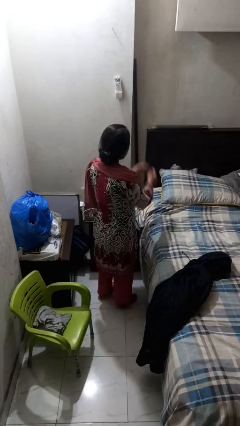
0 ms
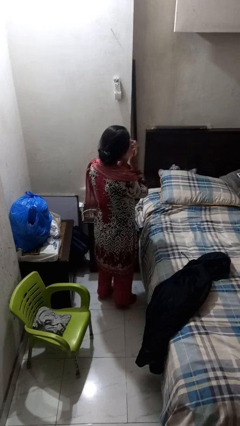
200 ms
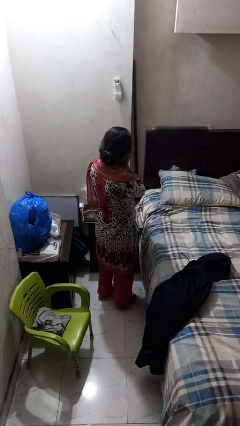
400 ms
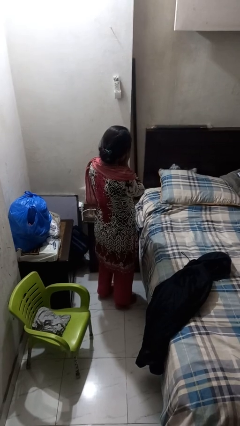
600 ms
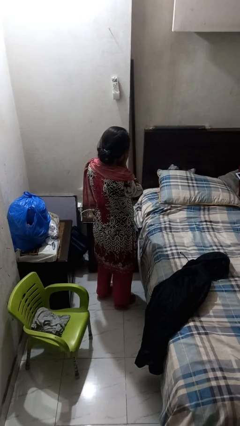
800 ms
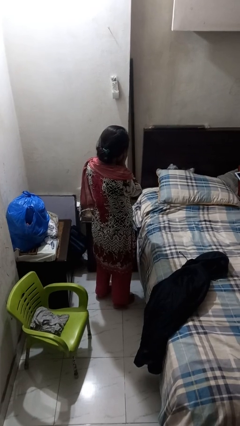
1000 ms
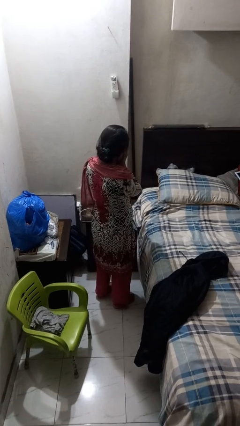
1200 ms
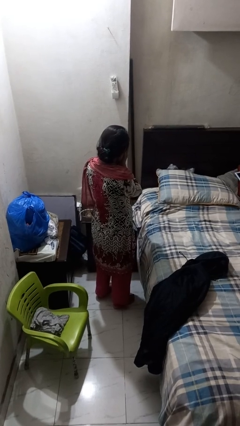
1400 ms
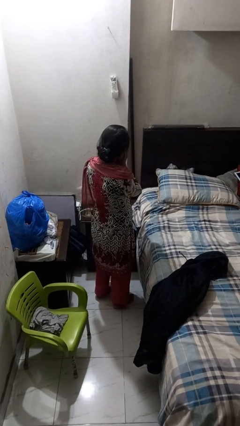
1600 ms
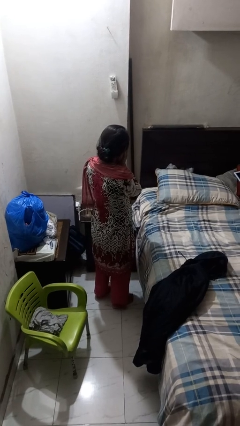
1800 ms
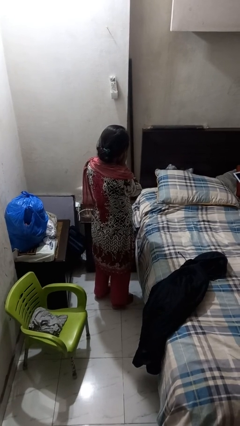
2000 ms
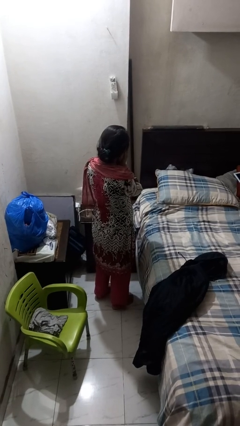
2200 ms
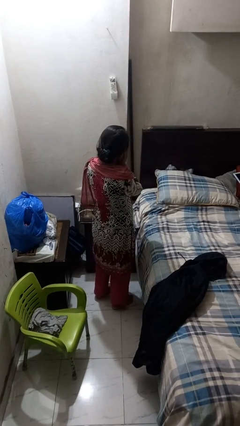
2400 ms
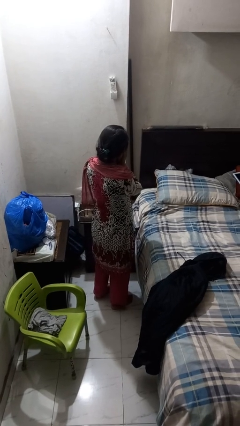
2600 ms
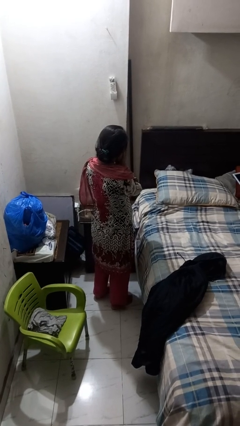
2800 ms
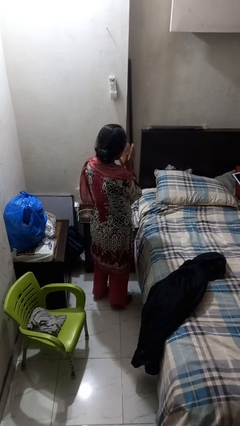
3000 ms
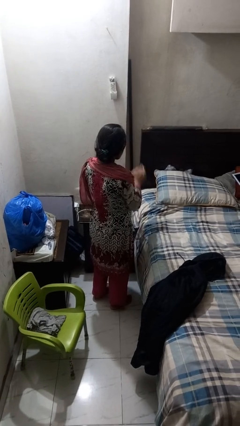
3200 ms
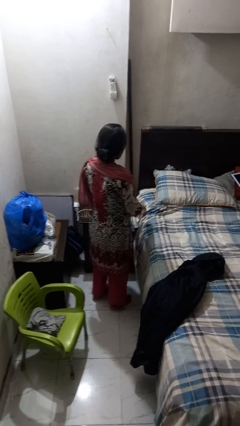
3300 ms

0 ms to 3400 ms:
person covers face with hands

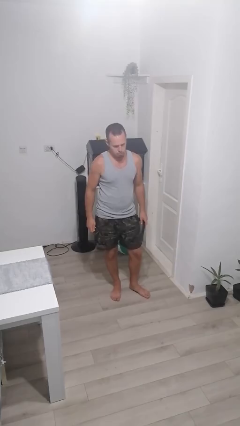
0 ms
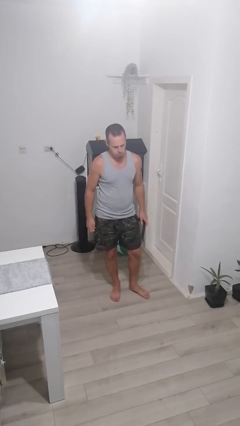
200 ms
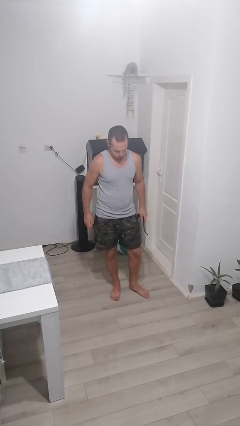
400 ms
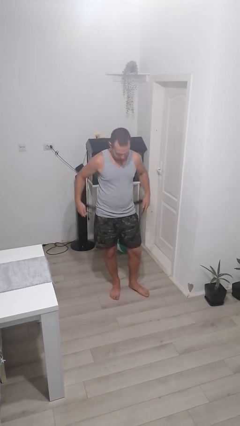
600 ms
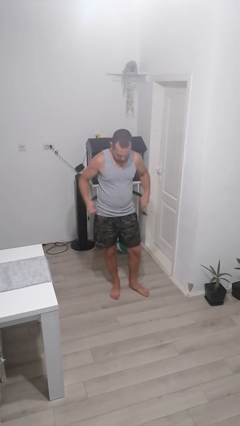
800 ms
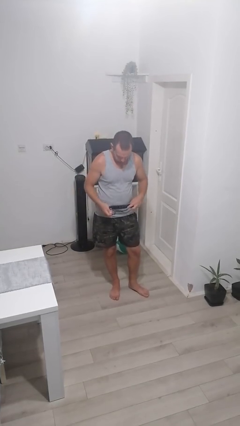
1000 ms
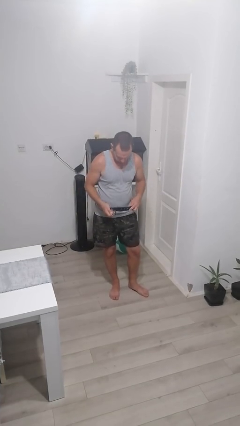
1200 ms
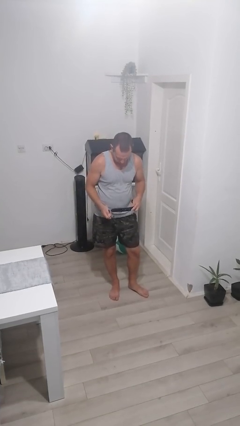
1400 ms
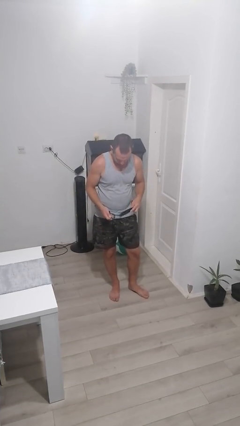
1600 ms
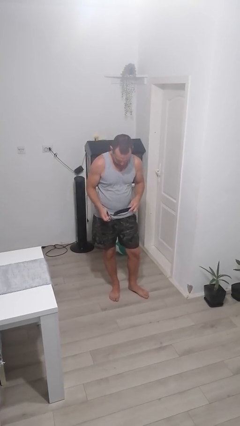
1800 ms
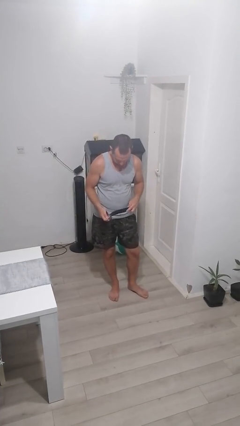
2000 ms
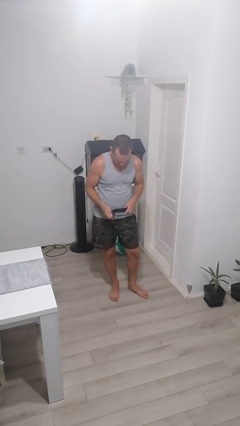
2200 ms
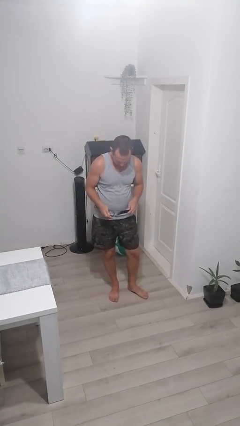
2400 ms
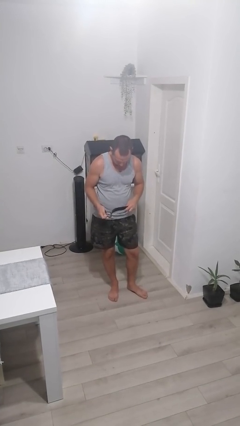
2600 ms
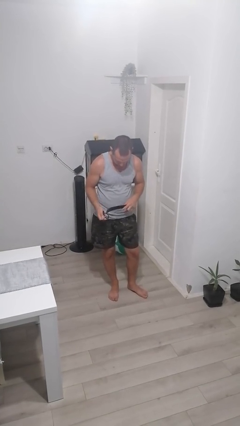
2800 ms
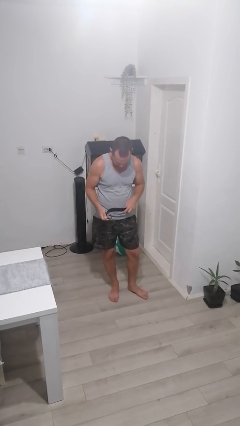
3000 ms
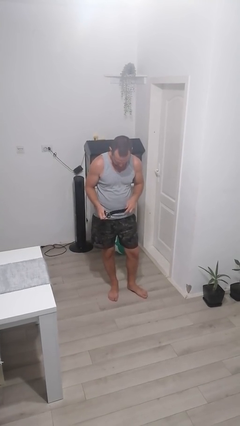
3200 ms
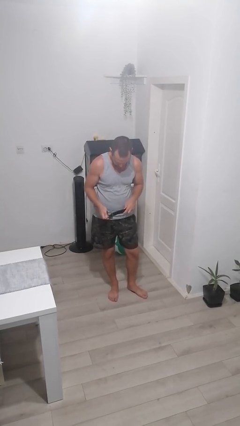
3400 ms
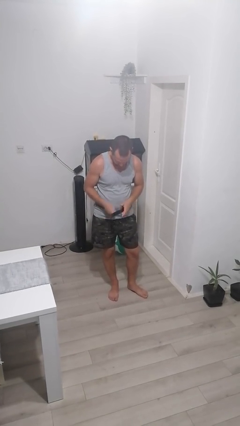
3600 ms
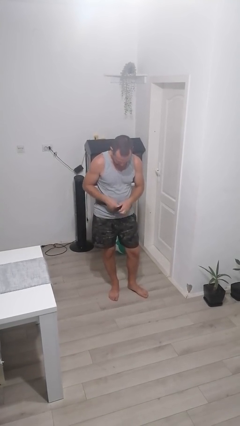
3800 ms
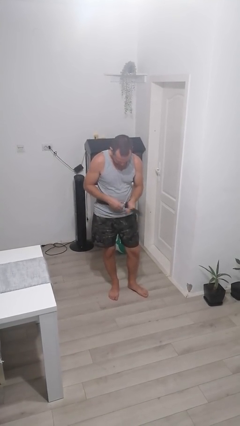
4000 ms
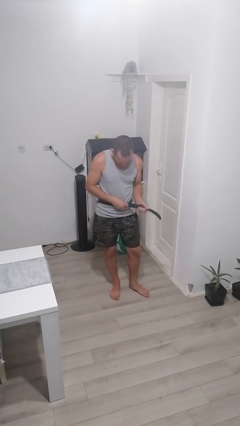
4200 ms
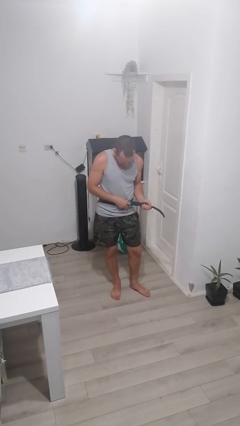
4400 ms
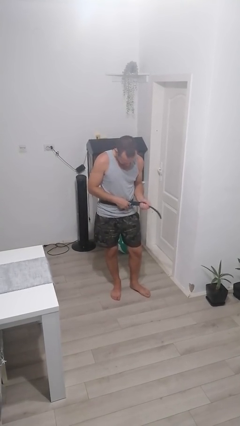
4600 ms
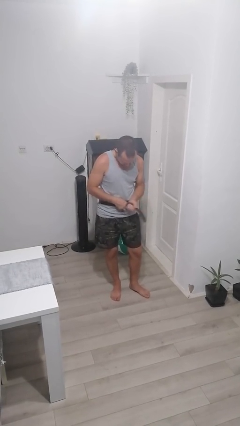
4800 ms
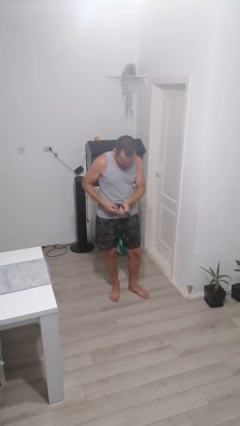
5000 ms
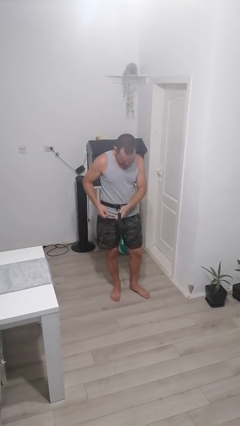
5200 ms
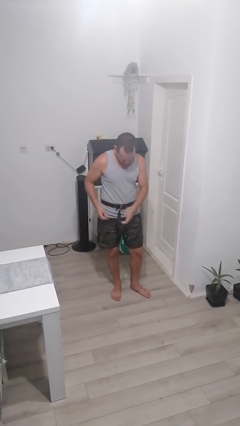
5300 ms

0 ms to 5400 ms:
person puts on belt

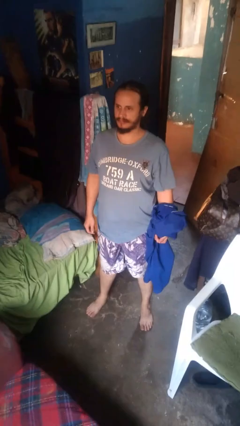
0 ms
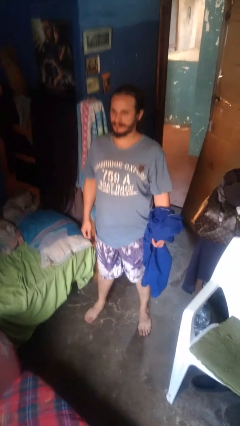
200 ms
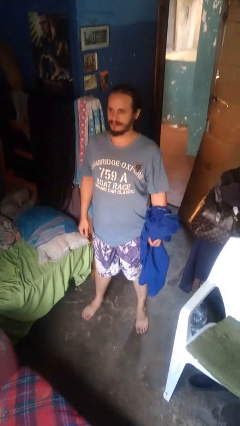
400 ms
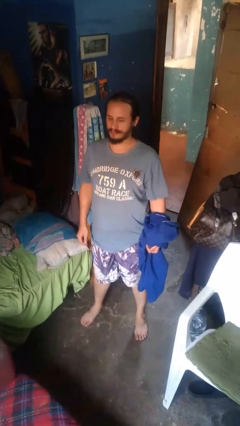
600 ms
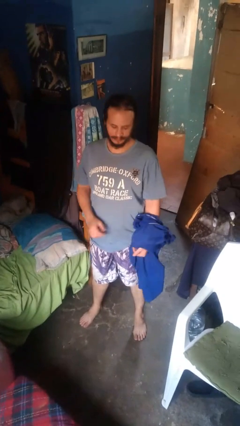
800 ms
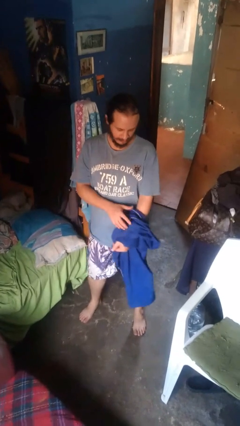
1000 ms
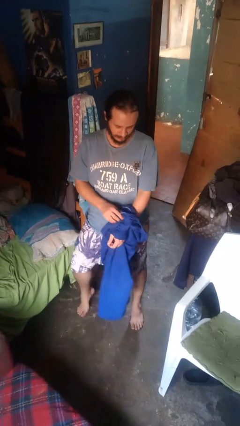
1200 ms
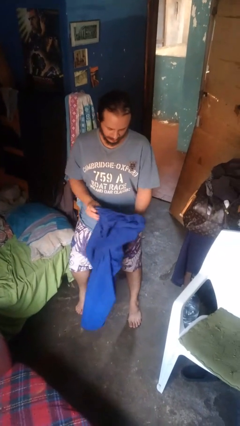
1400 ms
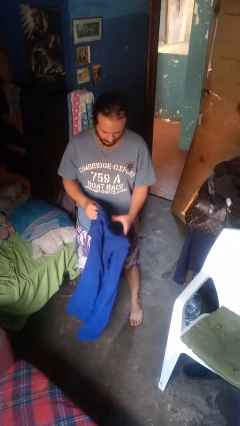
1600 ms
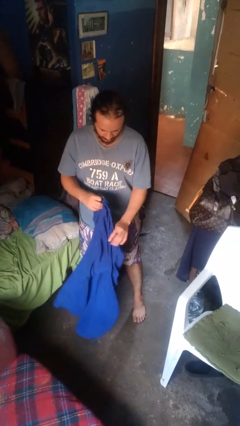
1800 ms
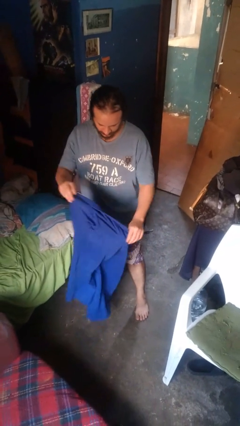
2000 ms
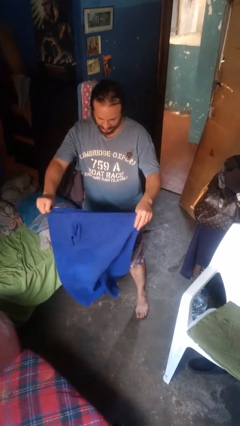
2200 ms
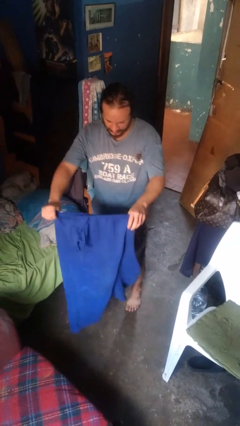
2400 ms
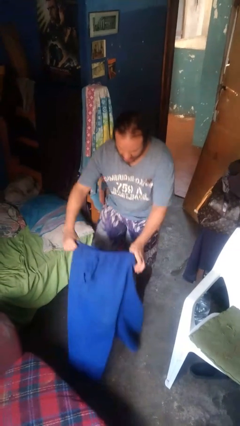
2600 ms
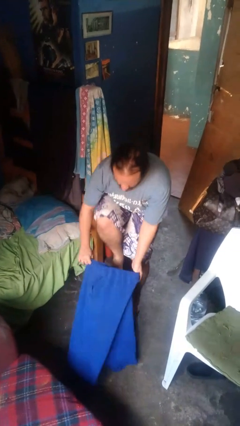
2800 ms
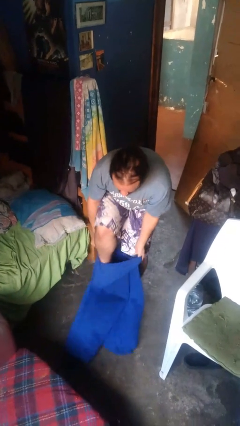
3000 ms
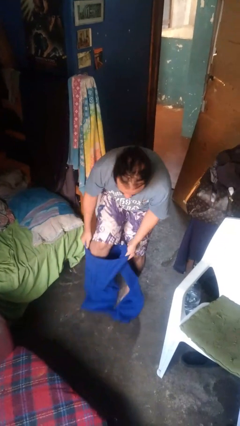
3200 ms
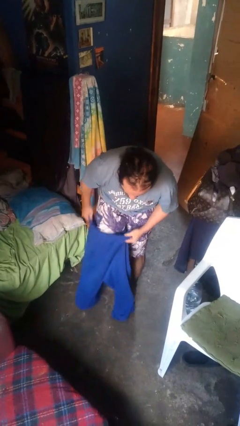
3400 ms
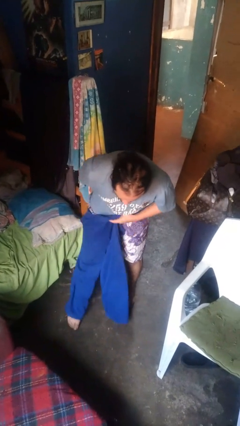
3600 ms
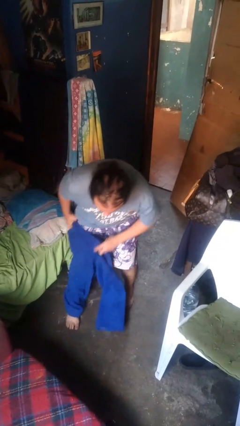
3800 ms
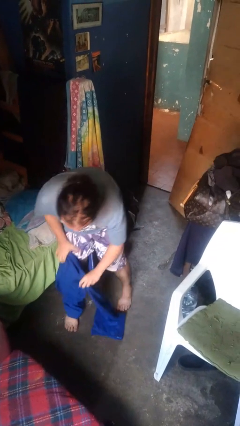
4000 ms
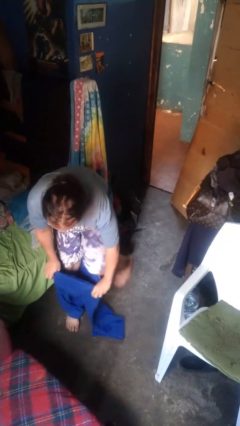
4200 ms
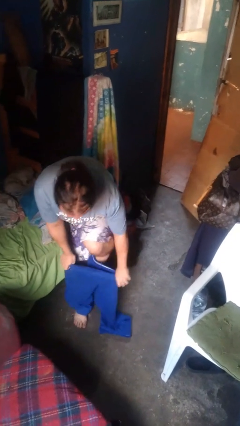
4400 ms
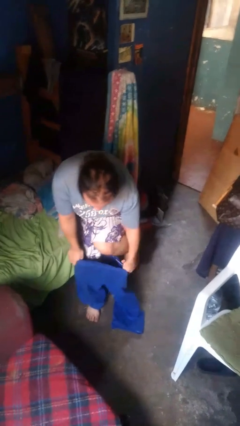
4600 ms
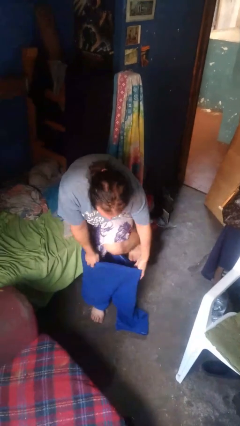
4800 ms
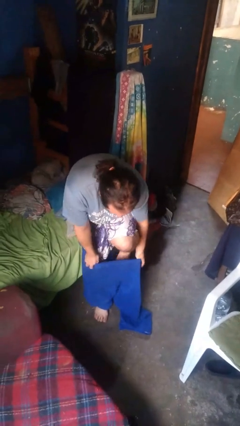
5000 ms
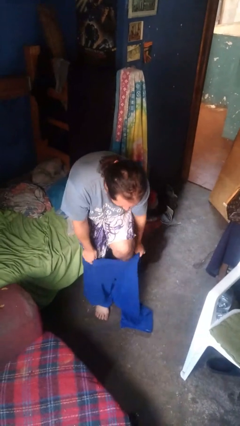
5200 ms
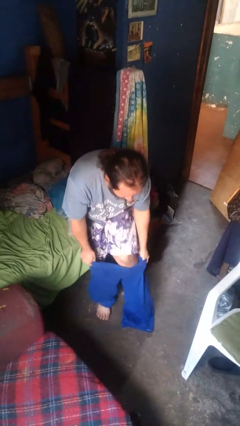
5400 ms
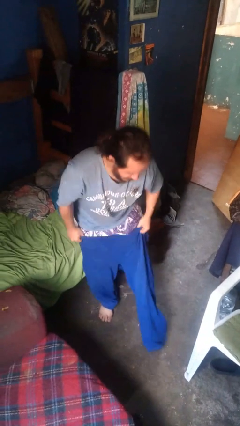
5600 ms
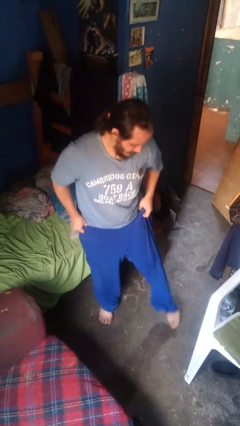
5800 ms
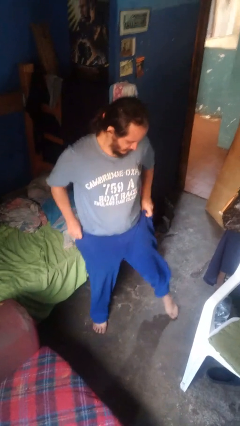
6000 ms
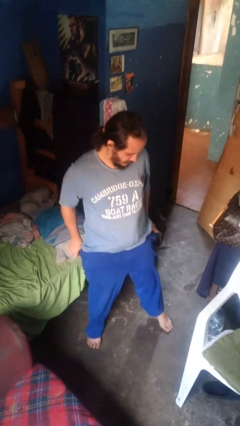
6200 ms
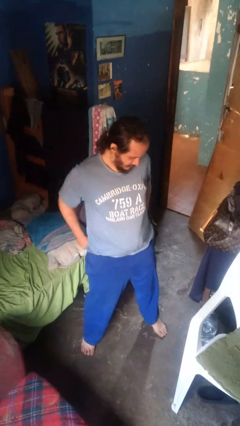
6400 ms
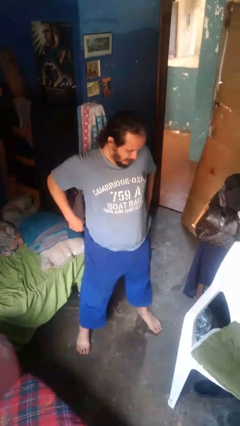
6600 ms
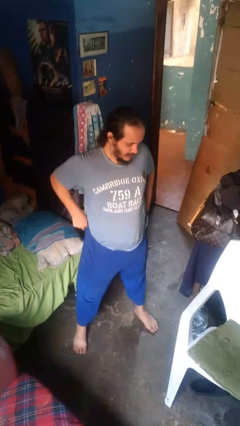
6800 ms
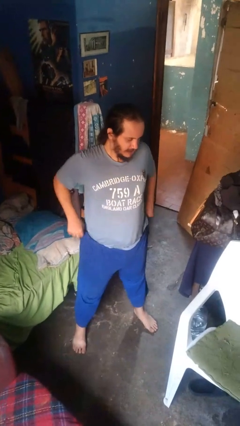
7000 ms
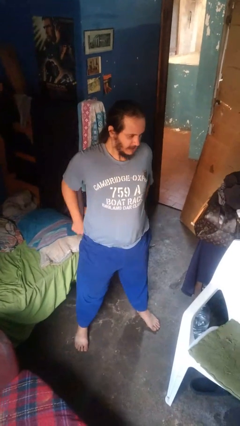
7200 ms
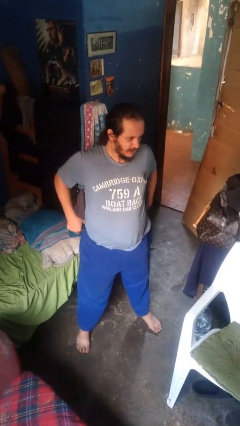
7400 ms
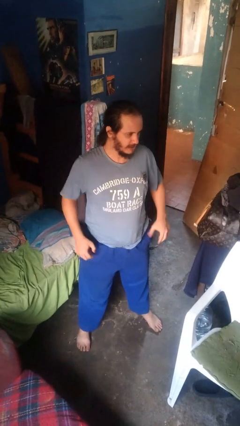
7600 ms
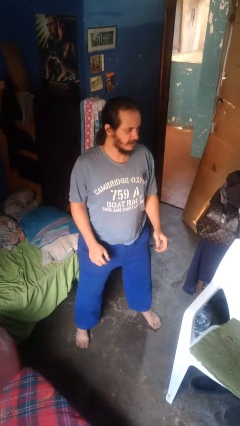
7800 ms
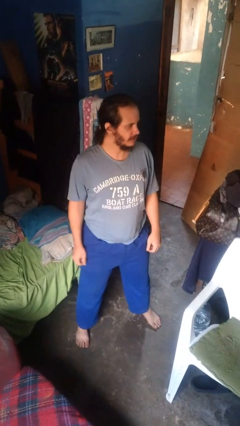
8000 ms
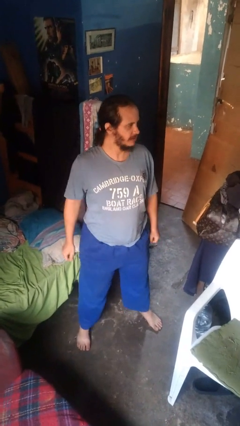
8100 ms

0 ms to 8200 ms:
person puts on pants

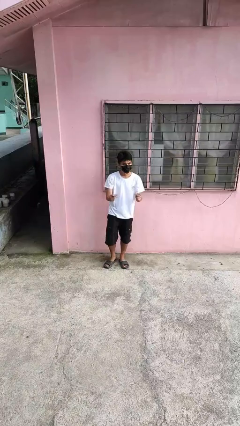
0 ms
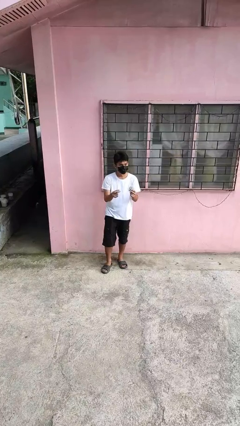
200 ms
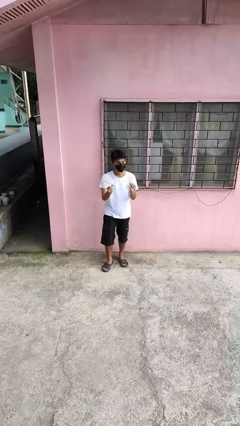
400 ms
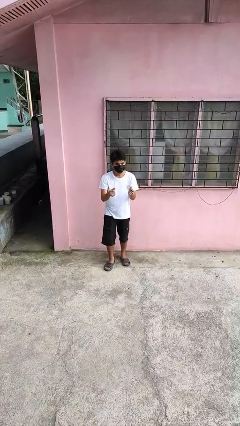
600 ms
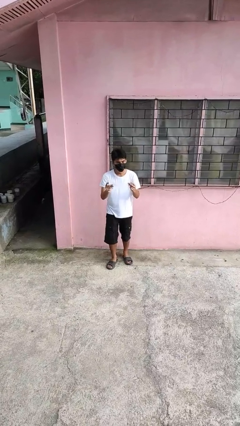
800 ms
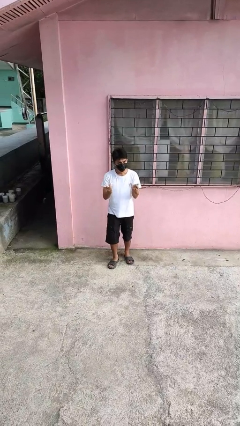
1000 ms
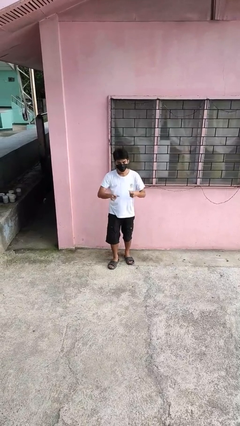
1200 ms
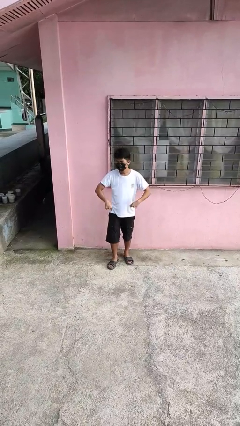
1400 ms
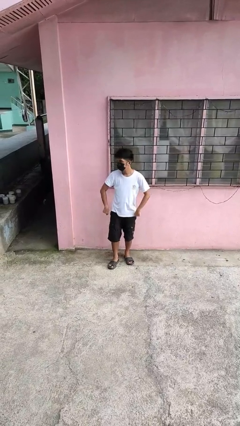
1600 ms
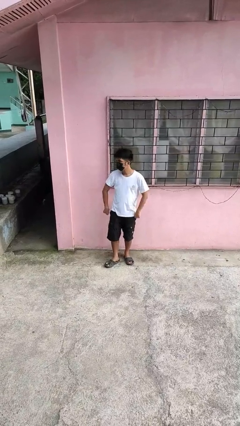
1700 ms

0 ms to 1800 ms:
person snaps fingers
